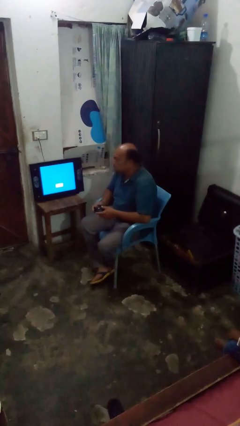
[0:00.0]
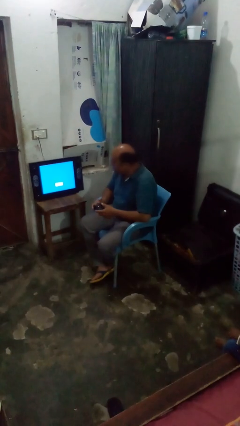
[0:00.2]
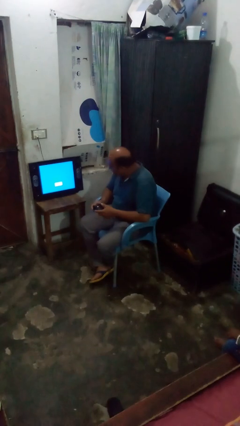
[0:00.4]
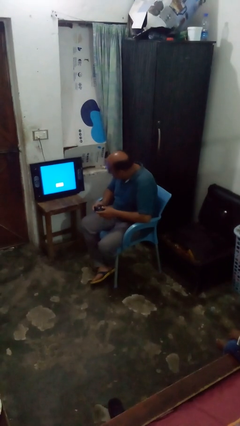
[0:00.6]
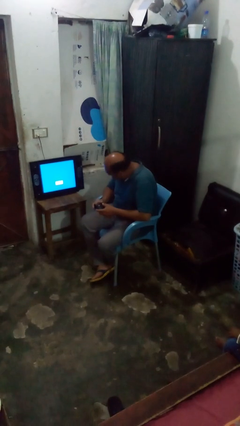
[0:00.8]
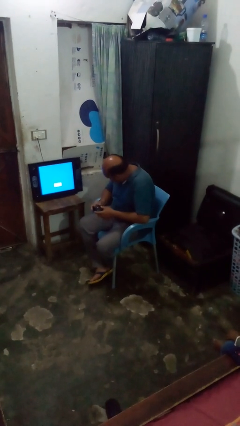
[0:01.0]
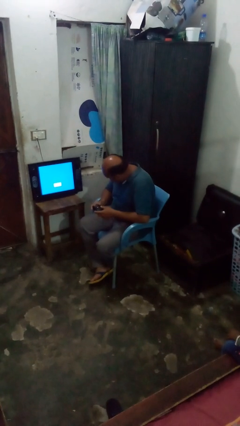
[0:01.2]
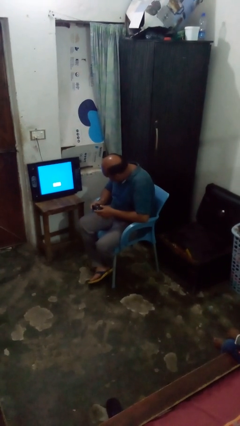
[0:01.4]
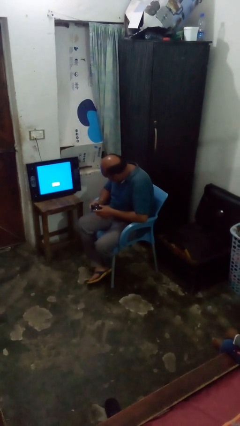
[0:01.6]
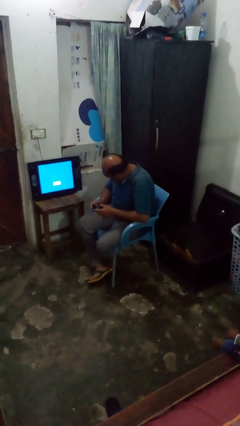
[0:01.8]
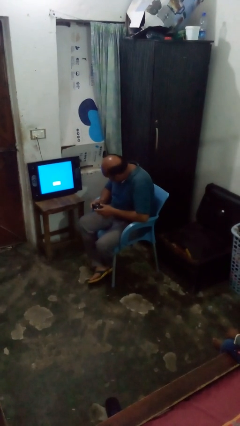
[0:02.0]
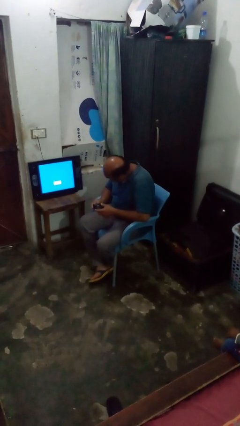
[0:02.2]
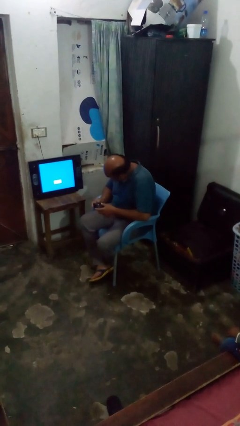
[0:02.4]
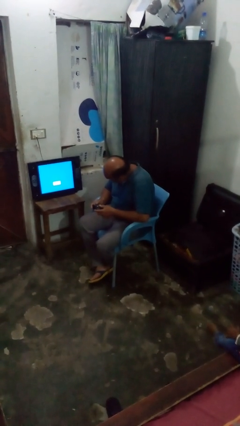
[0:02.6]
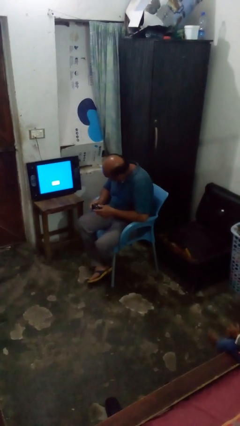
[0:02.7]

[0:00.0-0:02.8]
person interacts with handheld game

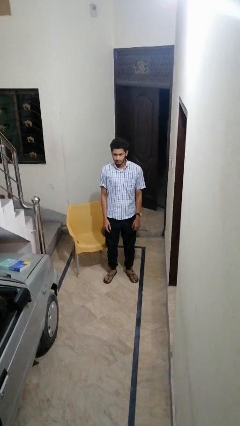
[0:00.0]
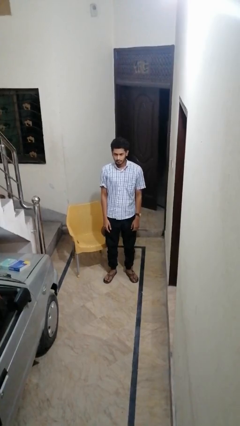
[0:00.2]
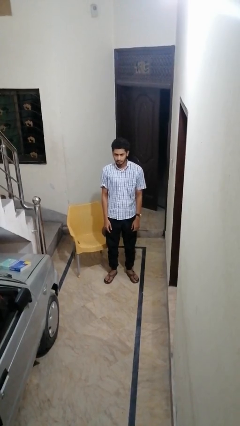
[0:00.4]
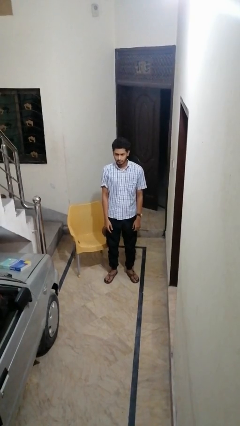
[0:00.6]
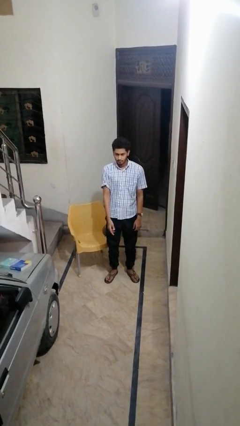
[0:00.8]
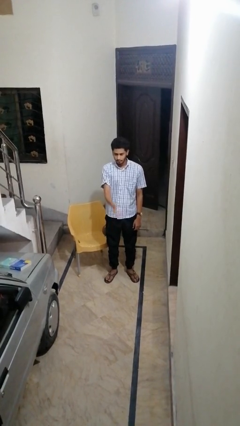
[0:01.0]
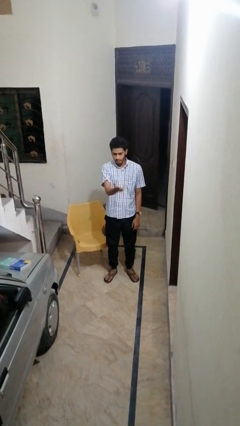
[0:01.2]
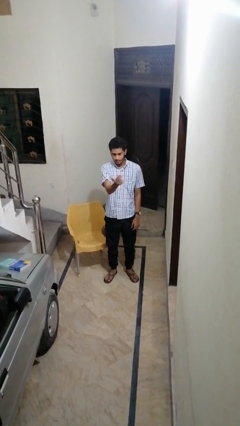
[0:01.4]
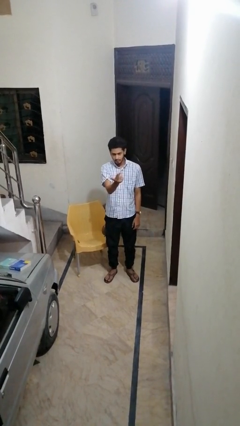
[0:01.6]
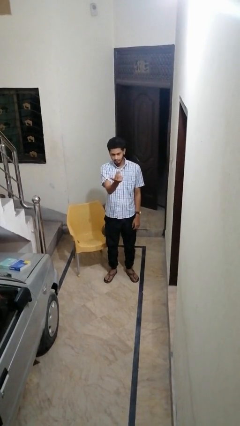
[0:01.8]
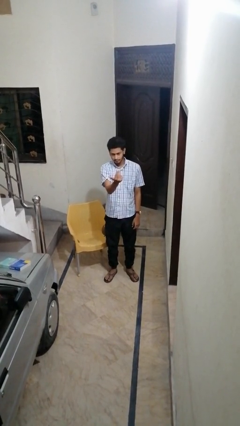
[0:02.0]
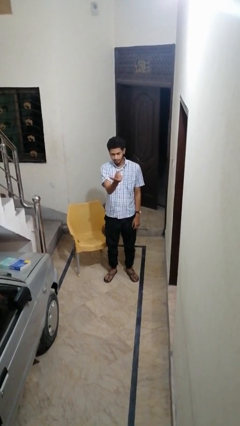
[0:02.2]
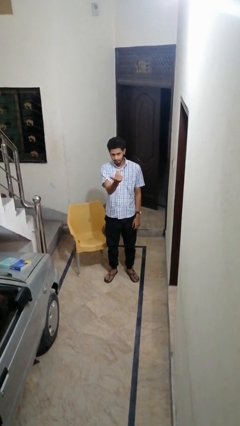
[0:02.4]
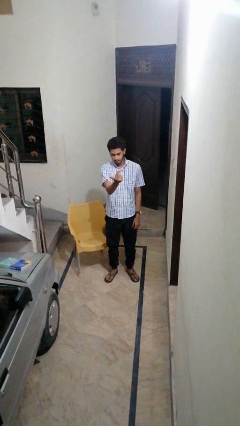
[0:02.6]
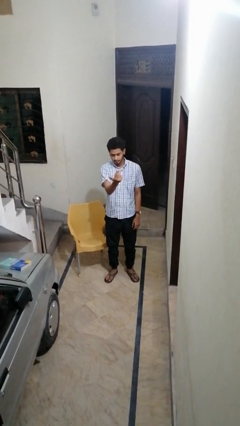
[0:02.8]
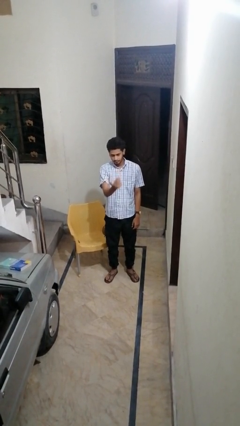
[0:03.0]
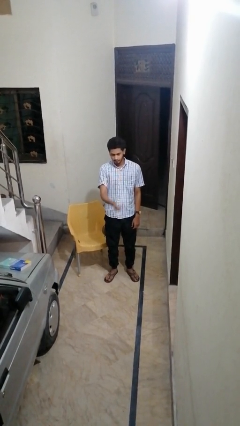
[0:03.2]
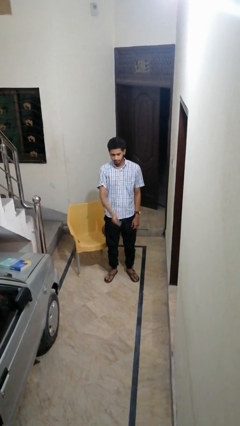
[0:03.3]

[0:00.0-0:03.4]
person gestures come here

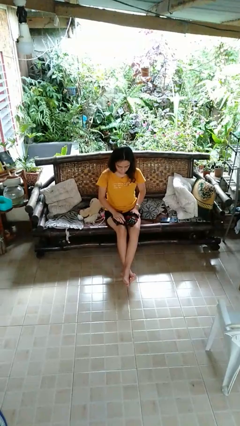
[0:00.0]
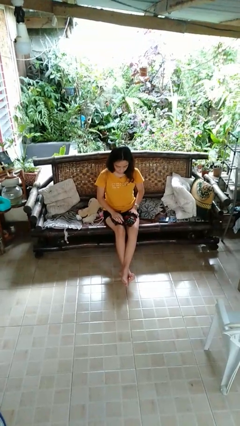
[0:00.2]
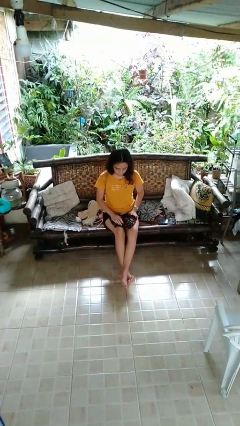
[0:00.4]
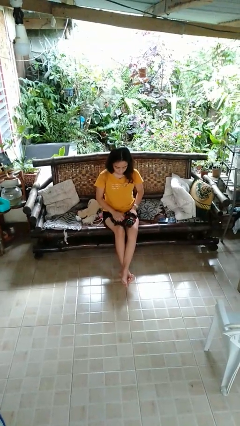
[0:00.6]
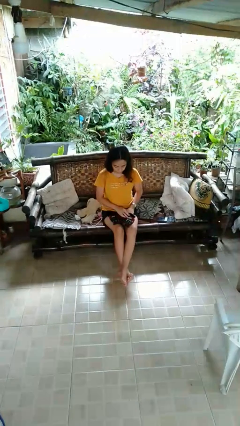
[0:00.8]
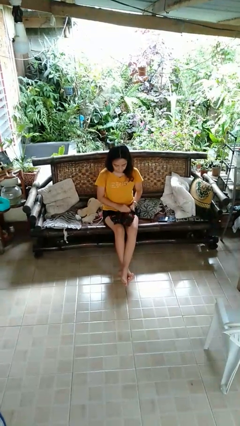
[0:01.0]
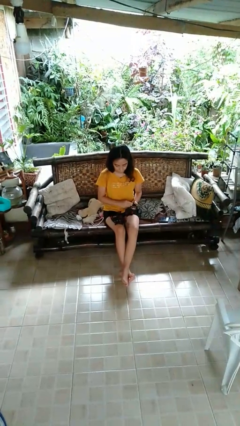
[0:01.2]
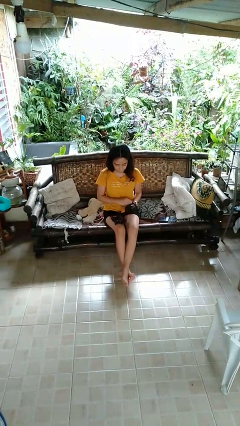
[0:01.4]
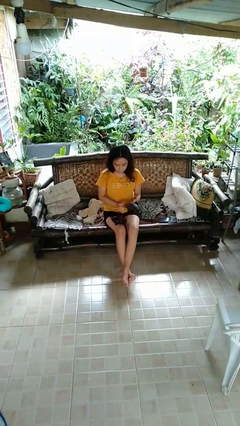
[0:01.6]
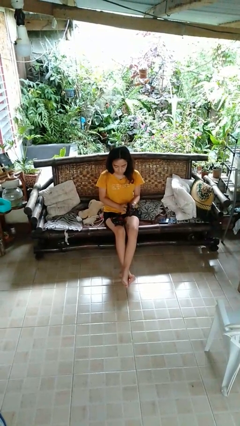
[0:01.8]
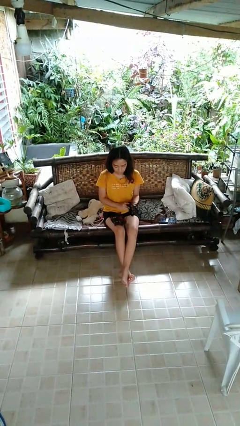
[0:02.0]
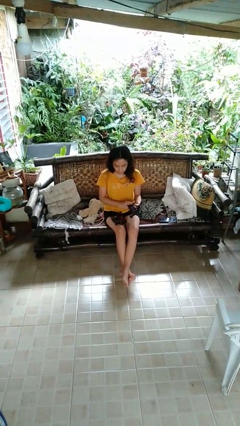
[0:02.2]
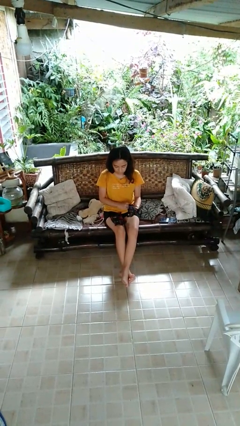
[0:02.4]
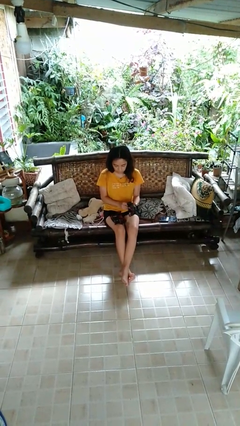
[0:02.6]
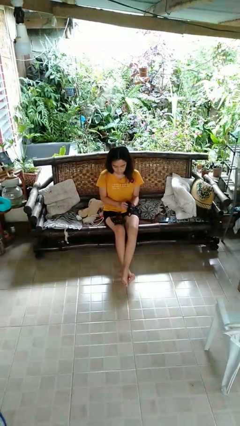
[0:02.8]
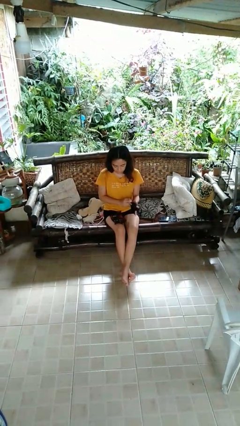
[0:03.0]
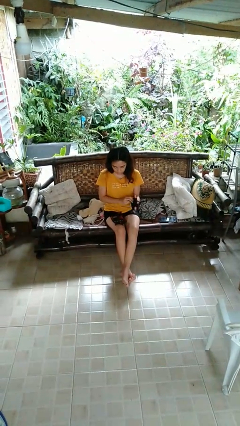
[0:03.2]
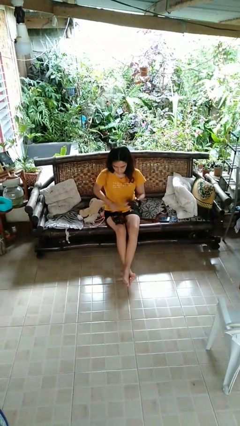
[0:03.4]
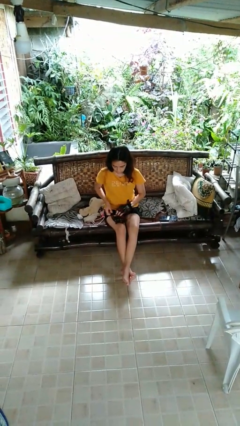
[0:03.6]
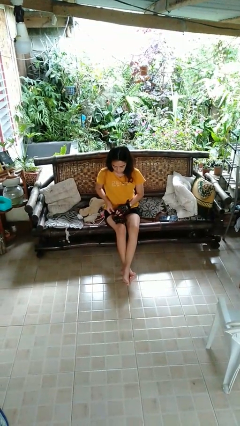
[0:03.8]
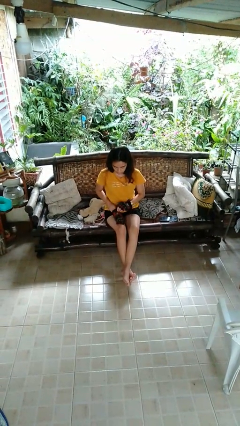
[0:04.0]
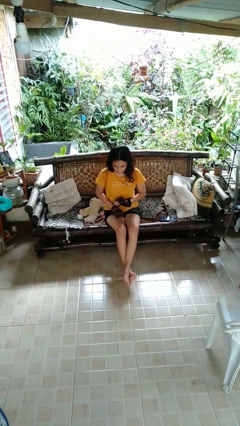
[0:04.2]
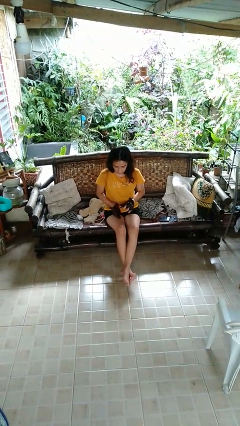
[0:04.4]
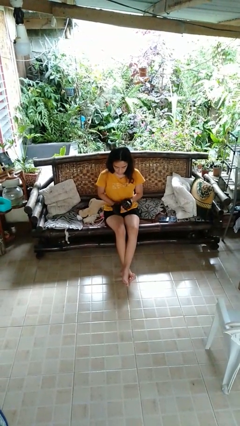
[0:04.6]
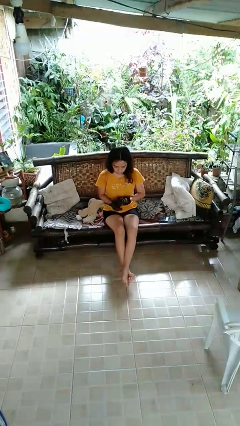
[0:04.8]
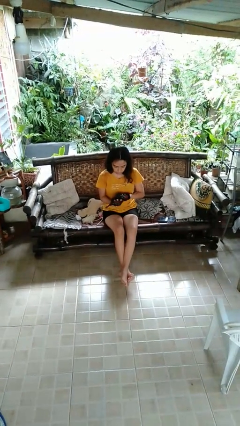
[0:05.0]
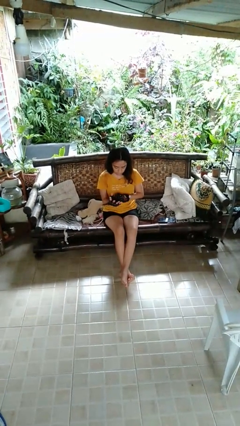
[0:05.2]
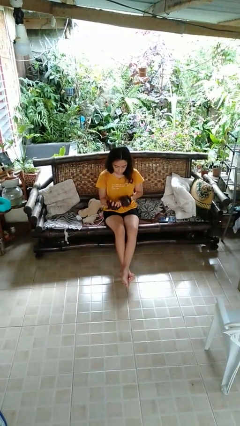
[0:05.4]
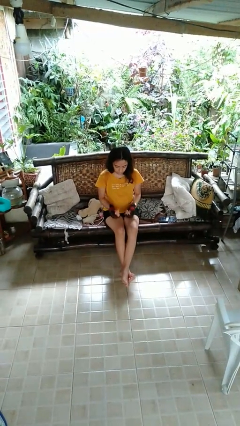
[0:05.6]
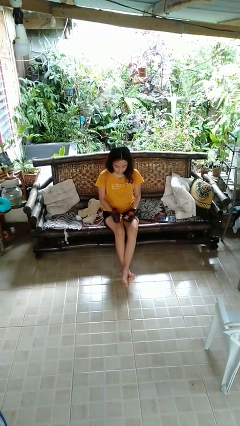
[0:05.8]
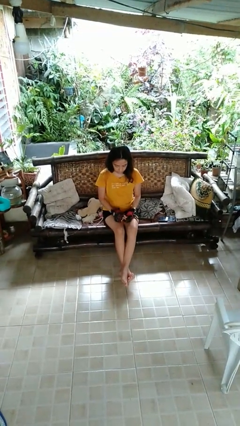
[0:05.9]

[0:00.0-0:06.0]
person puts on gloves

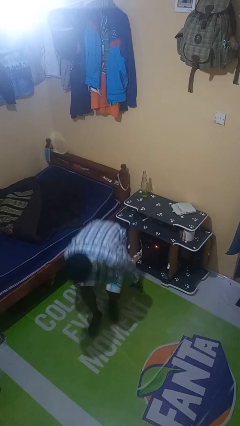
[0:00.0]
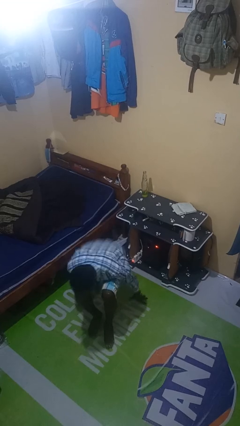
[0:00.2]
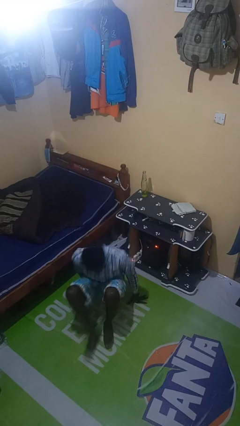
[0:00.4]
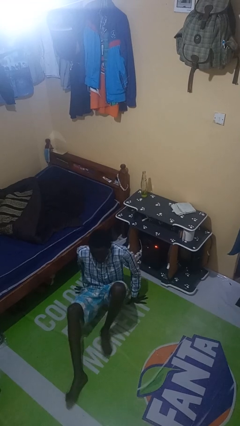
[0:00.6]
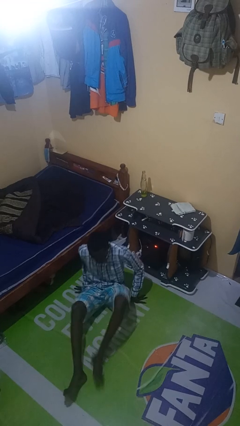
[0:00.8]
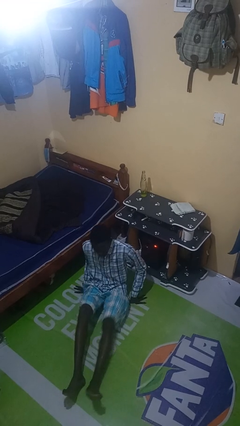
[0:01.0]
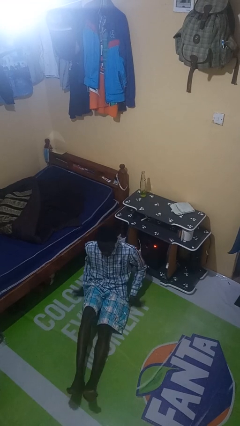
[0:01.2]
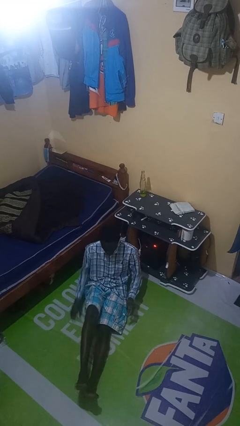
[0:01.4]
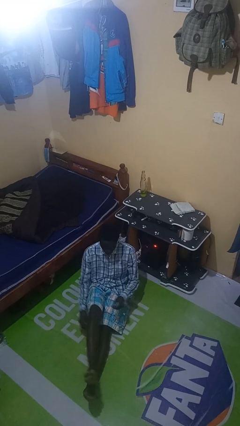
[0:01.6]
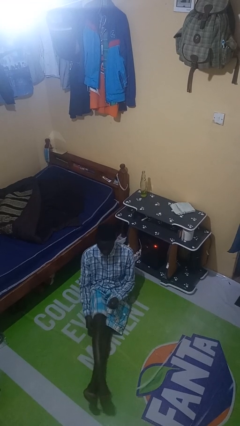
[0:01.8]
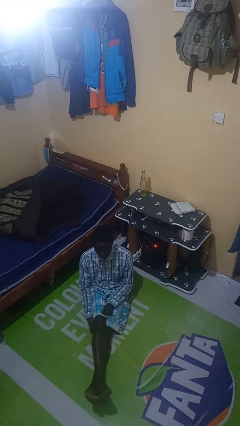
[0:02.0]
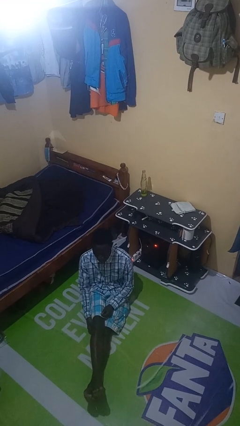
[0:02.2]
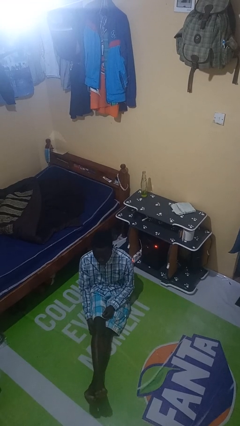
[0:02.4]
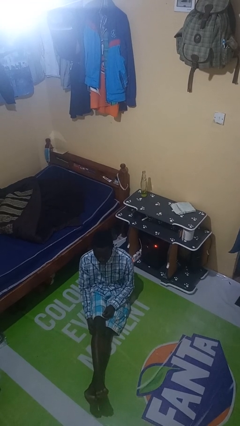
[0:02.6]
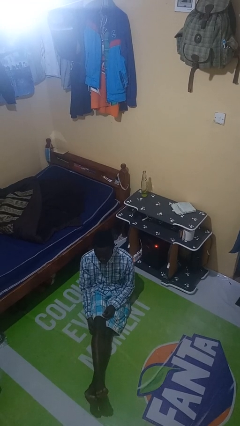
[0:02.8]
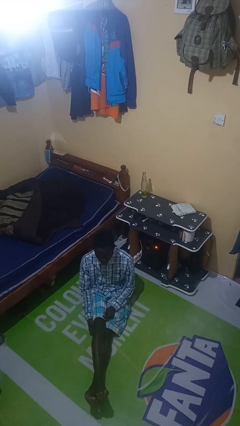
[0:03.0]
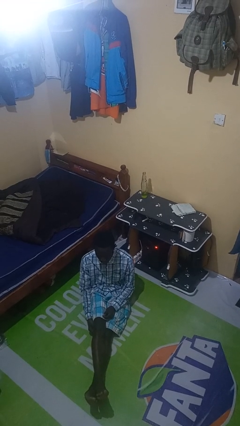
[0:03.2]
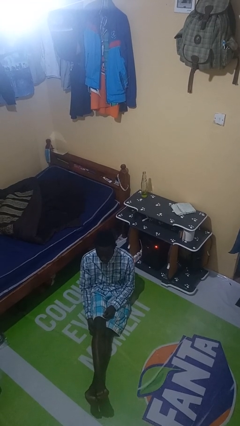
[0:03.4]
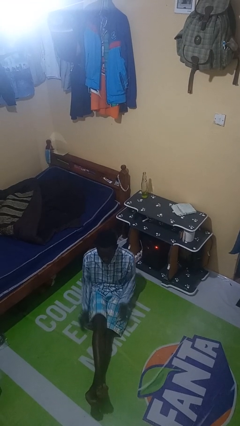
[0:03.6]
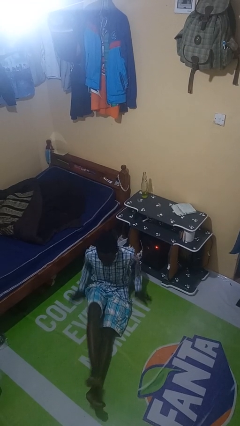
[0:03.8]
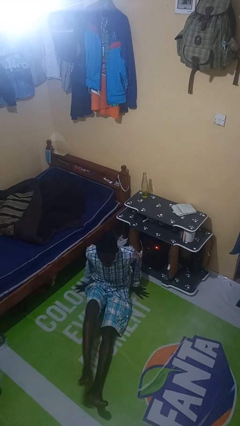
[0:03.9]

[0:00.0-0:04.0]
person sits crisscross

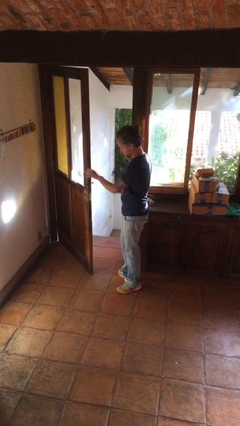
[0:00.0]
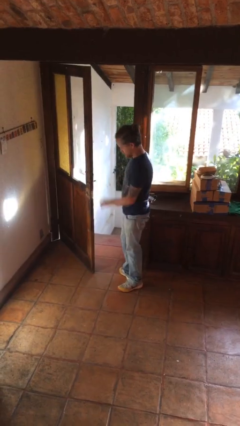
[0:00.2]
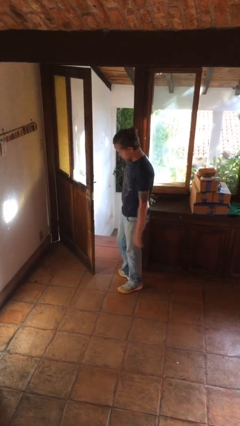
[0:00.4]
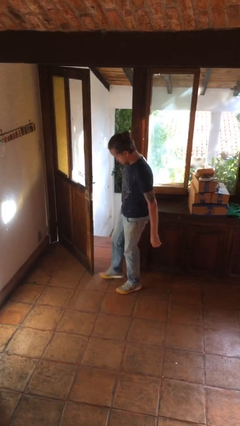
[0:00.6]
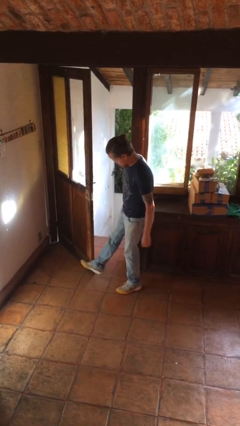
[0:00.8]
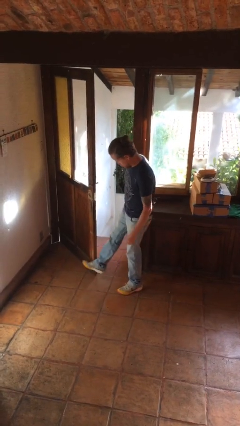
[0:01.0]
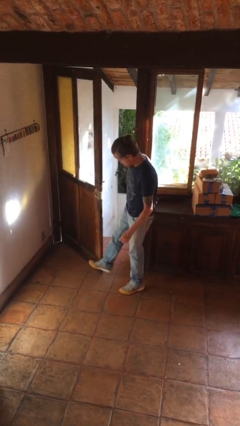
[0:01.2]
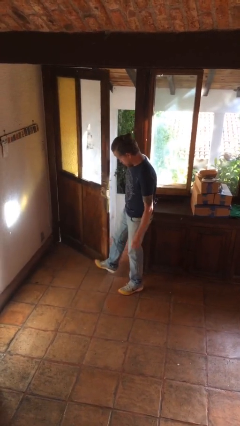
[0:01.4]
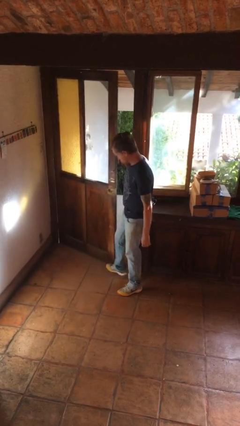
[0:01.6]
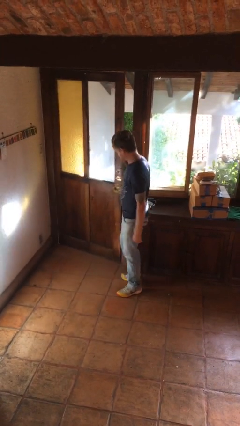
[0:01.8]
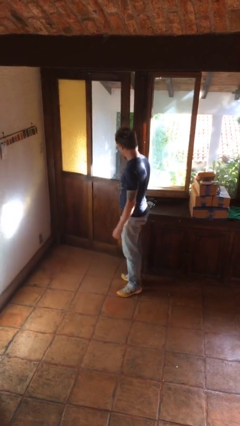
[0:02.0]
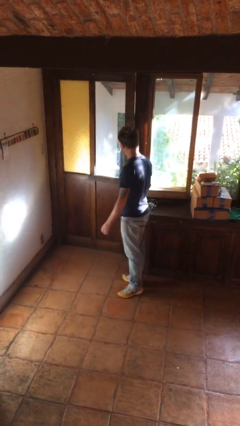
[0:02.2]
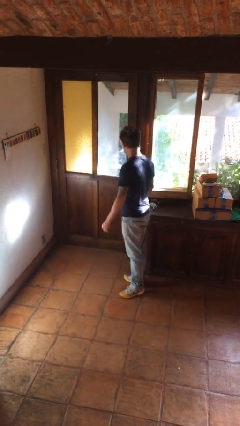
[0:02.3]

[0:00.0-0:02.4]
person closes door with foot
